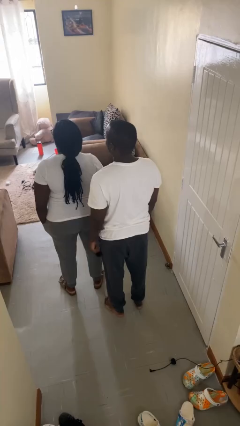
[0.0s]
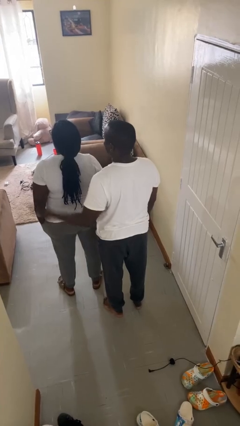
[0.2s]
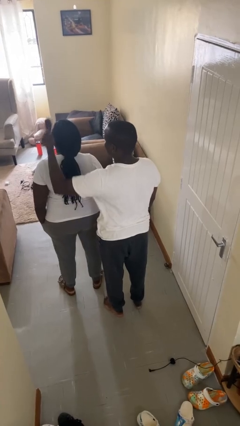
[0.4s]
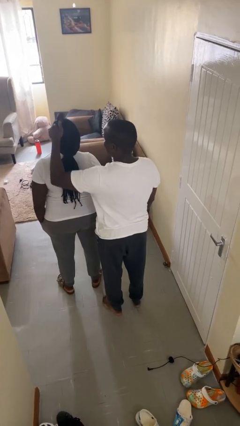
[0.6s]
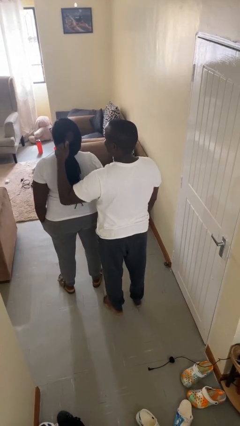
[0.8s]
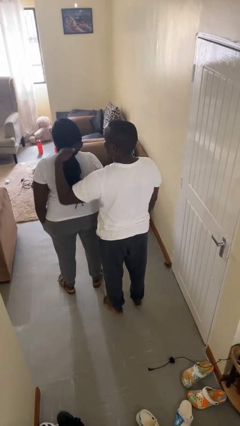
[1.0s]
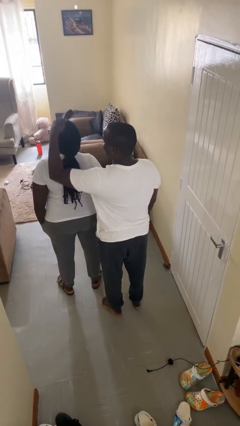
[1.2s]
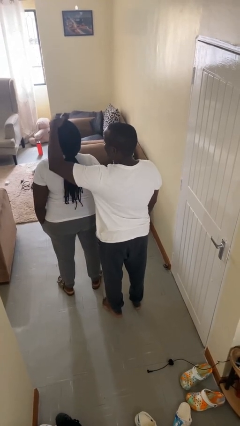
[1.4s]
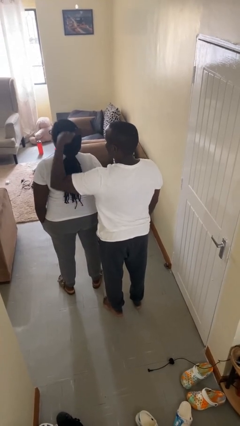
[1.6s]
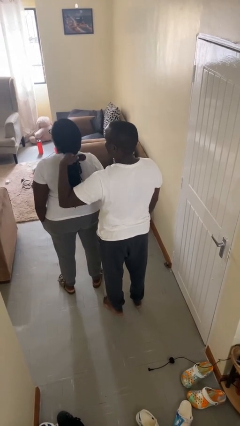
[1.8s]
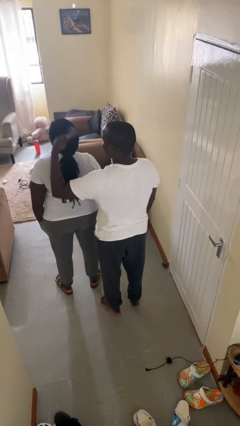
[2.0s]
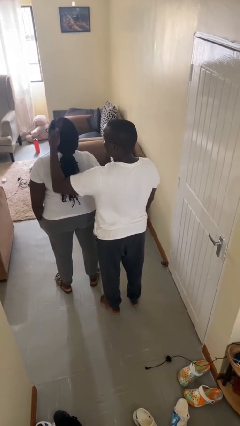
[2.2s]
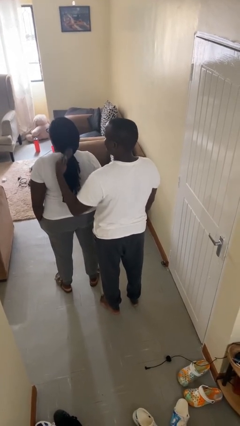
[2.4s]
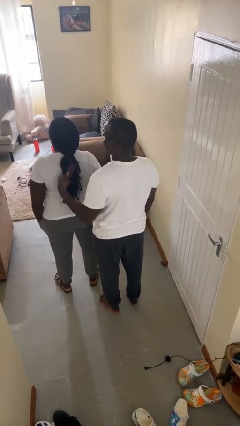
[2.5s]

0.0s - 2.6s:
person brushes hair of person

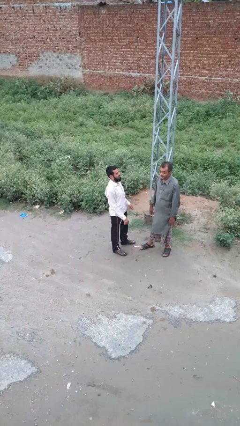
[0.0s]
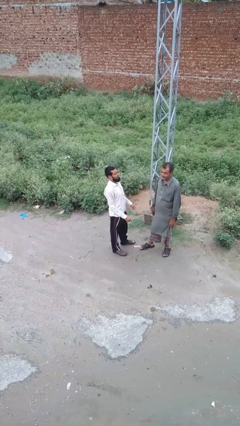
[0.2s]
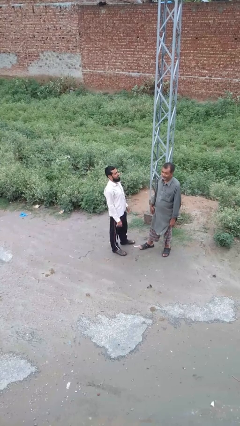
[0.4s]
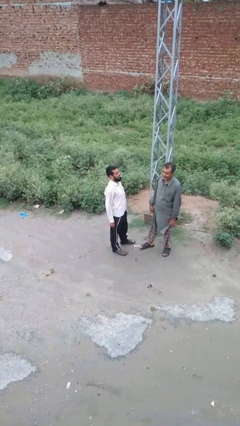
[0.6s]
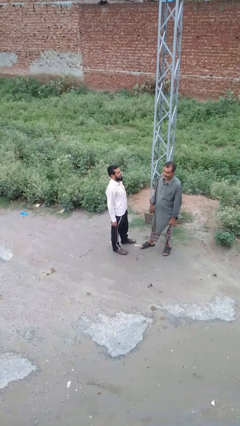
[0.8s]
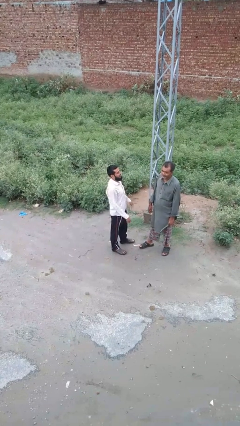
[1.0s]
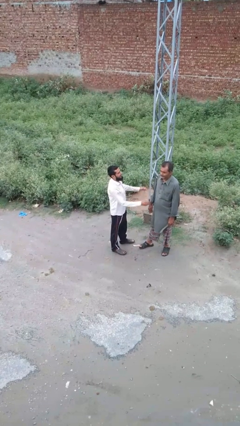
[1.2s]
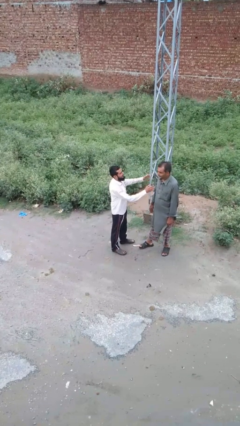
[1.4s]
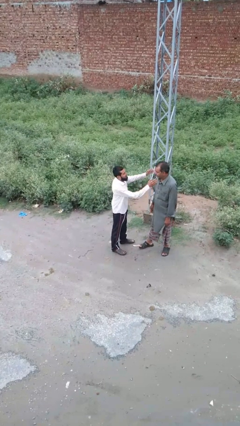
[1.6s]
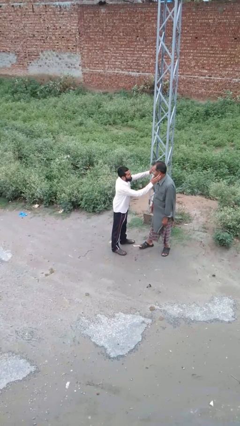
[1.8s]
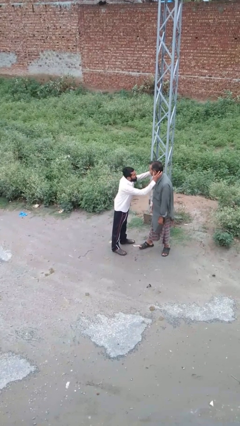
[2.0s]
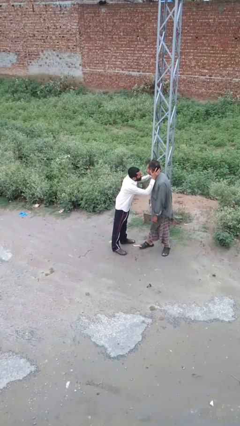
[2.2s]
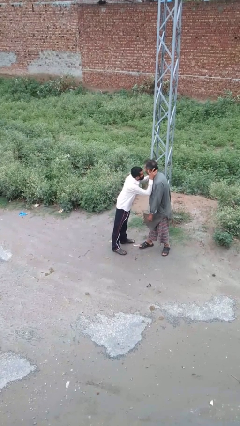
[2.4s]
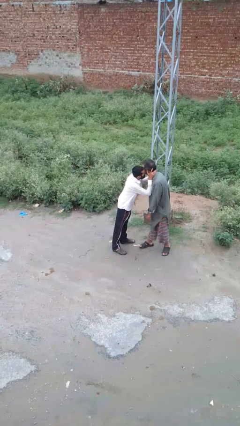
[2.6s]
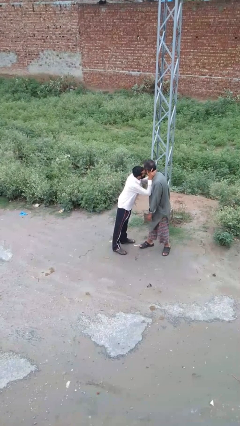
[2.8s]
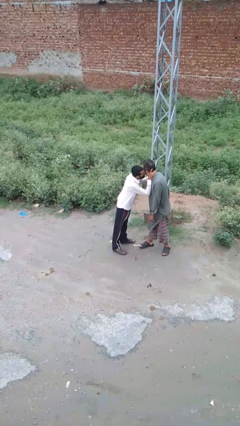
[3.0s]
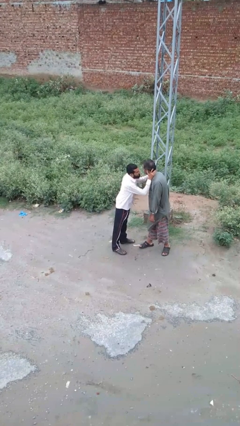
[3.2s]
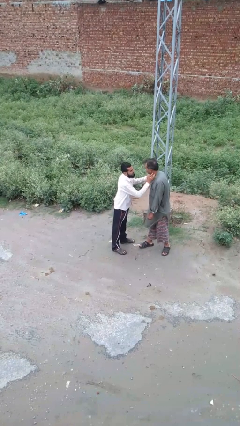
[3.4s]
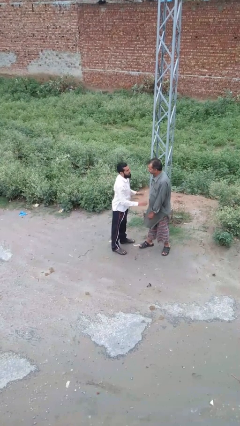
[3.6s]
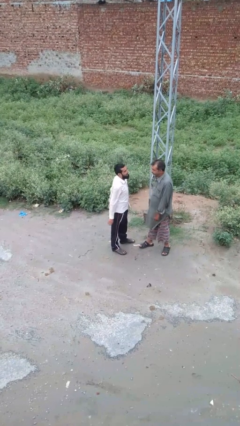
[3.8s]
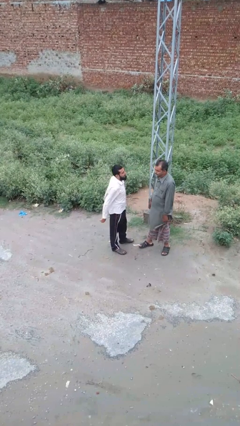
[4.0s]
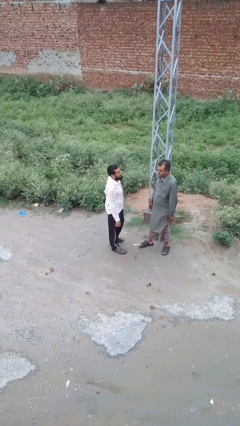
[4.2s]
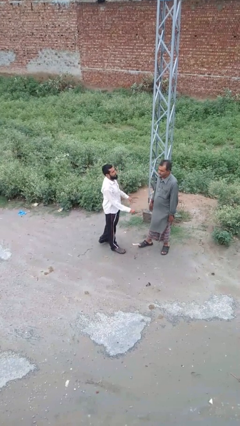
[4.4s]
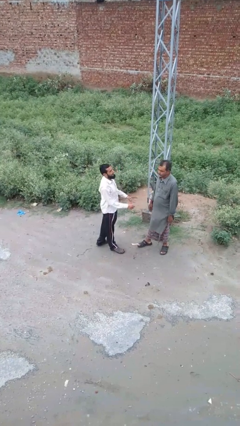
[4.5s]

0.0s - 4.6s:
person kisses cheek of person

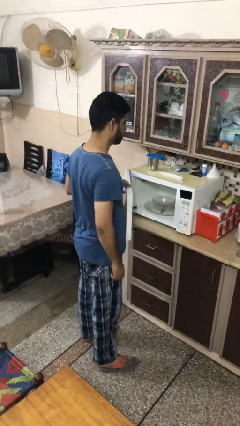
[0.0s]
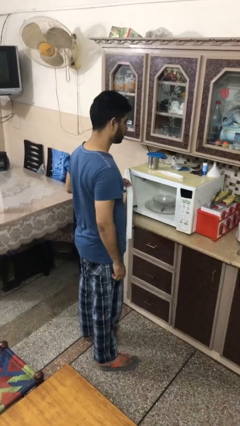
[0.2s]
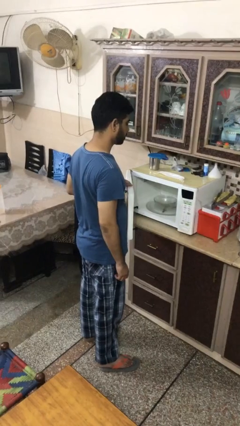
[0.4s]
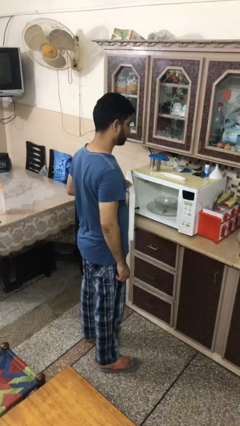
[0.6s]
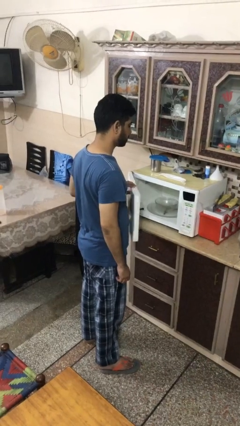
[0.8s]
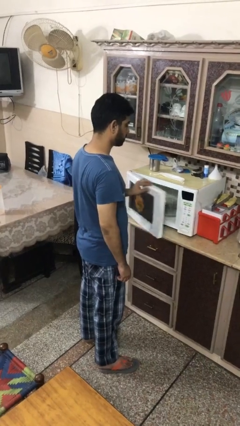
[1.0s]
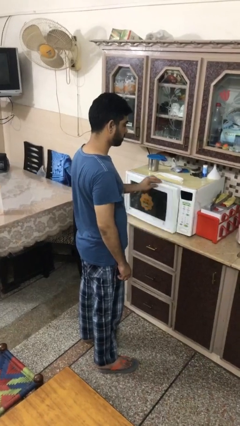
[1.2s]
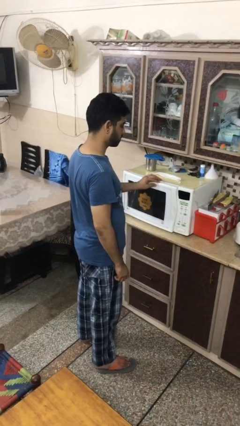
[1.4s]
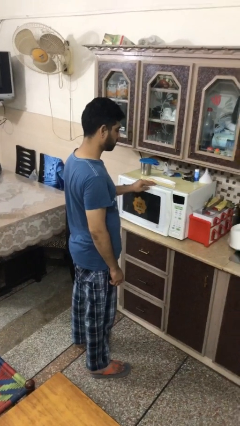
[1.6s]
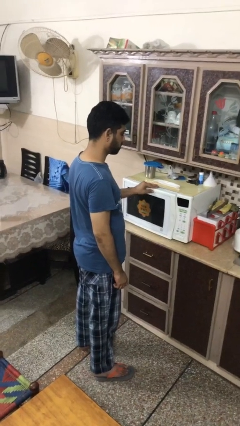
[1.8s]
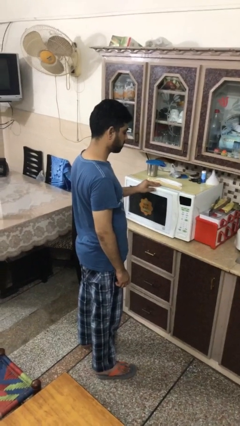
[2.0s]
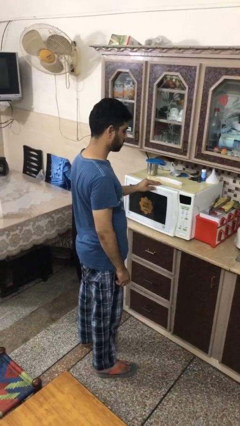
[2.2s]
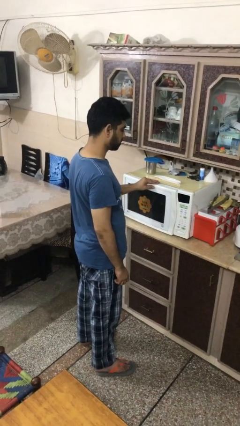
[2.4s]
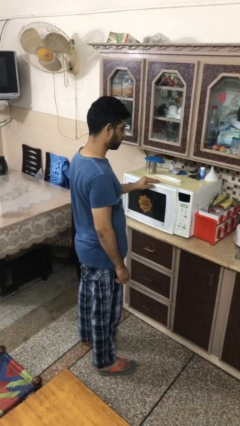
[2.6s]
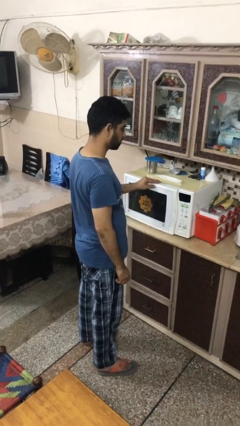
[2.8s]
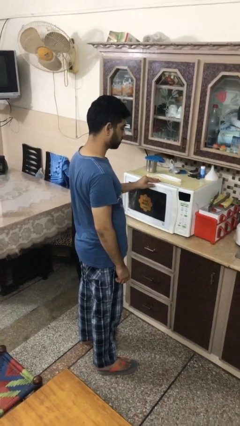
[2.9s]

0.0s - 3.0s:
person closes microwave

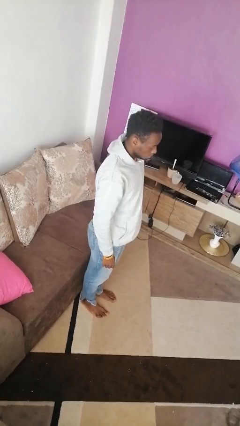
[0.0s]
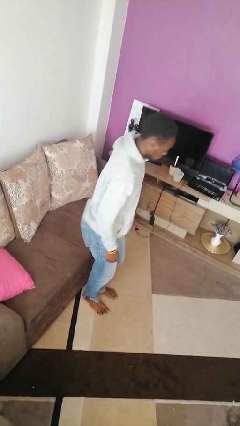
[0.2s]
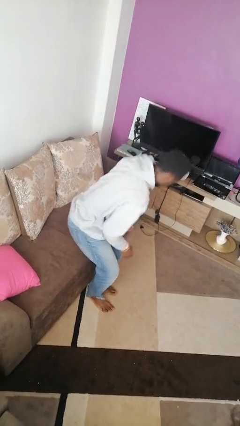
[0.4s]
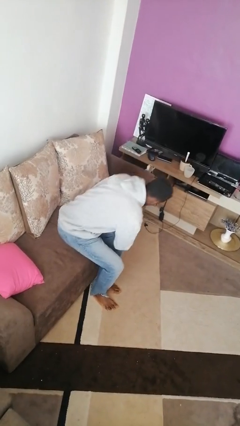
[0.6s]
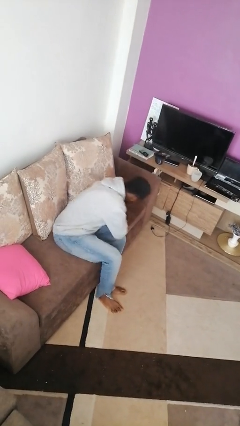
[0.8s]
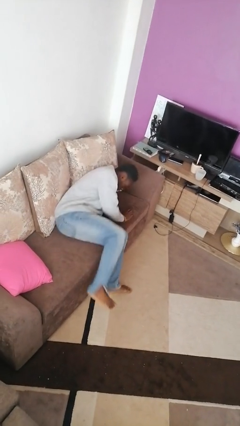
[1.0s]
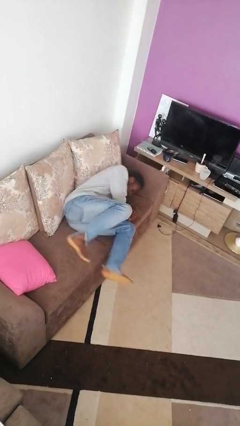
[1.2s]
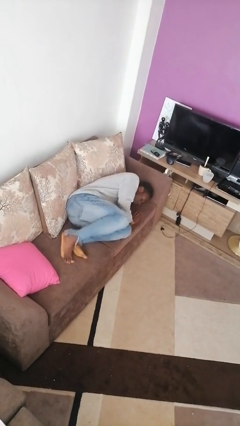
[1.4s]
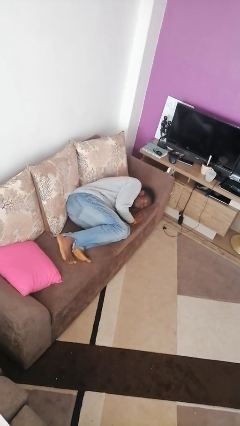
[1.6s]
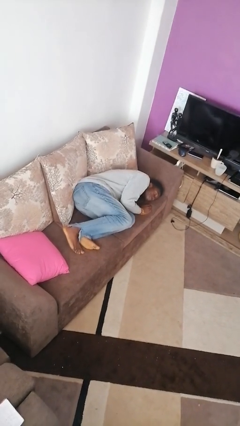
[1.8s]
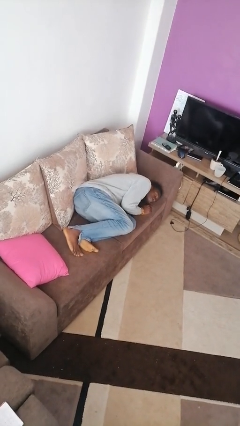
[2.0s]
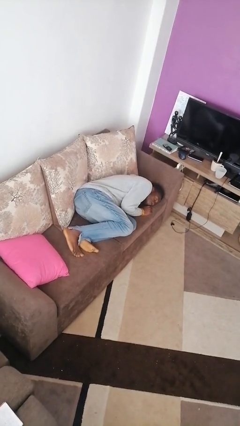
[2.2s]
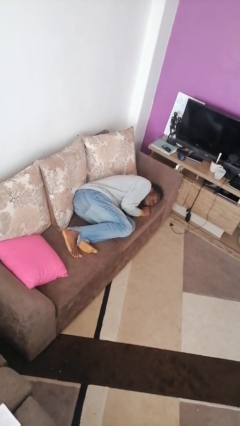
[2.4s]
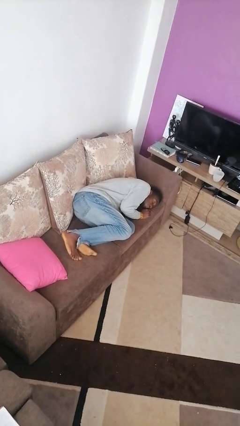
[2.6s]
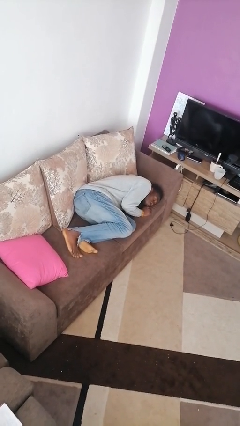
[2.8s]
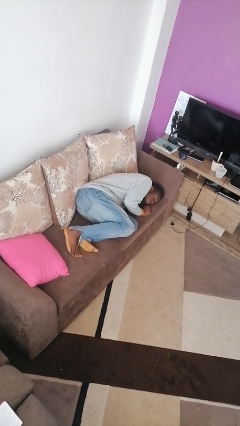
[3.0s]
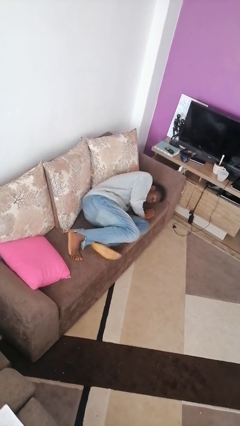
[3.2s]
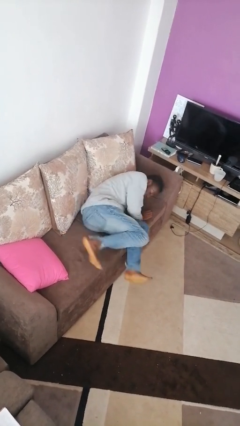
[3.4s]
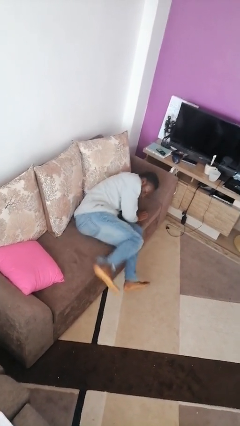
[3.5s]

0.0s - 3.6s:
person lies down on couch

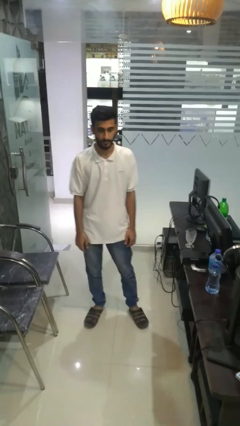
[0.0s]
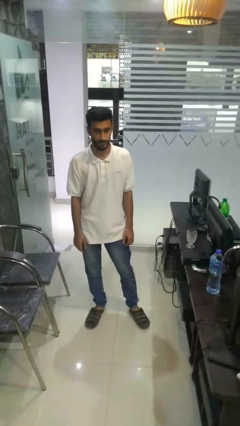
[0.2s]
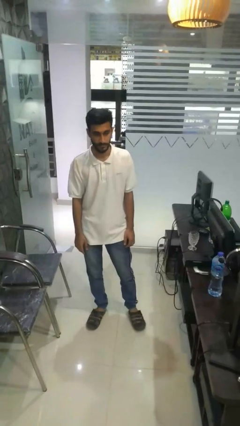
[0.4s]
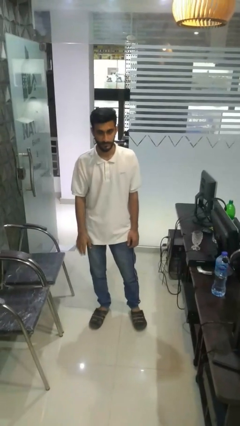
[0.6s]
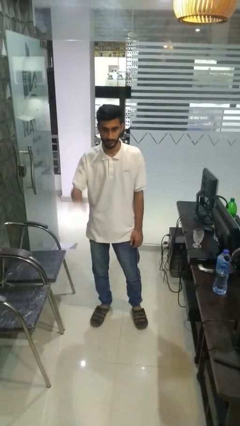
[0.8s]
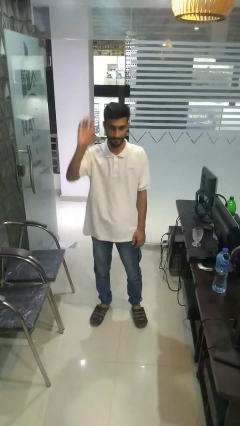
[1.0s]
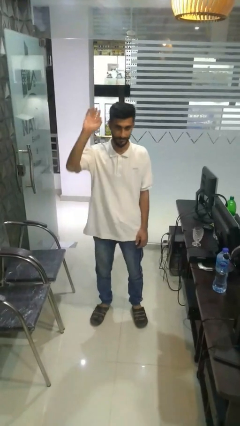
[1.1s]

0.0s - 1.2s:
person gestures raise hand

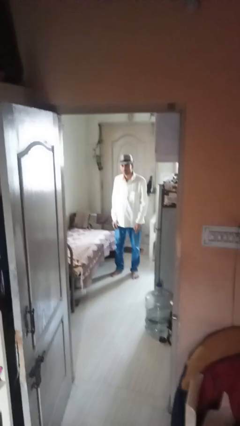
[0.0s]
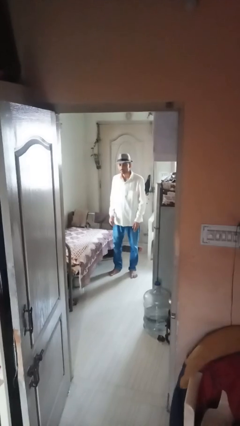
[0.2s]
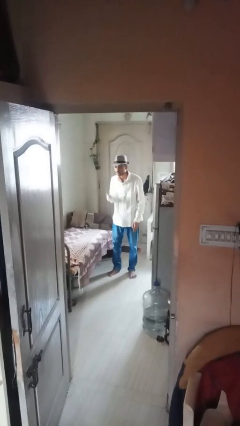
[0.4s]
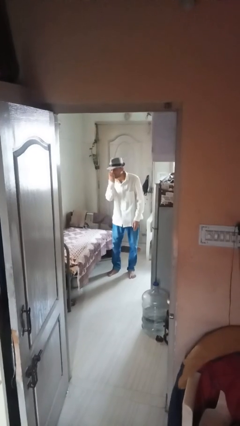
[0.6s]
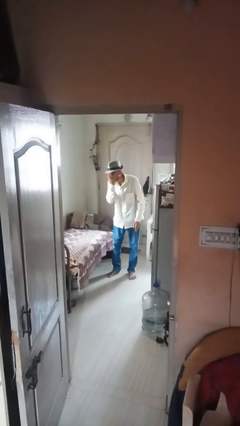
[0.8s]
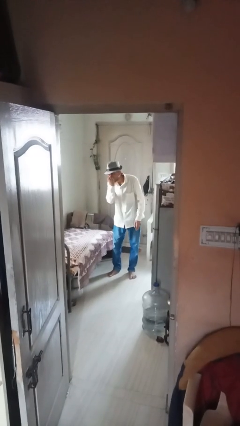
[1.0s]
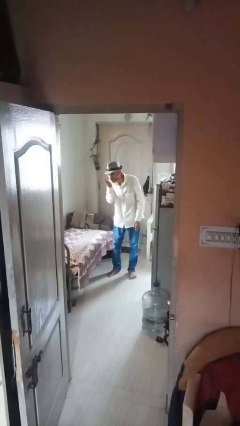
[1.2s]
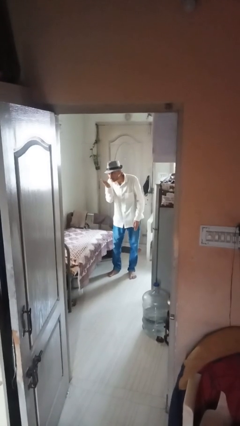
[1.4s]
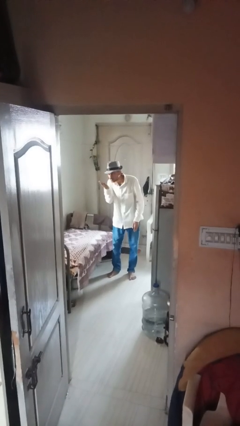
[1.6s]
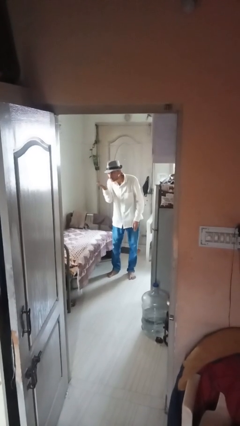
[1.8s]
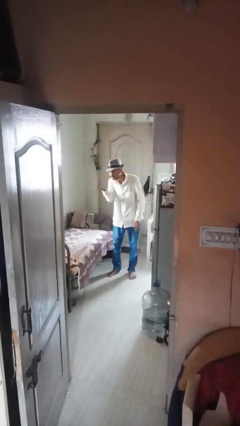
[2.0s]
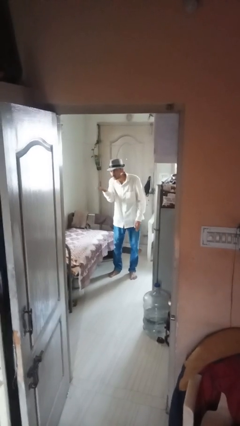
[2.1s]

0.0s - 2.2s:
person gestures blow kiss
